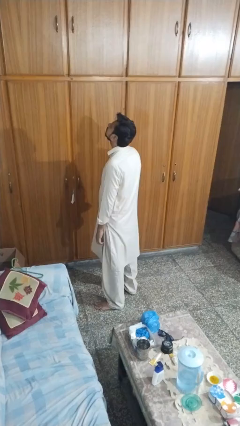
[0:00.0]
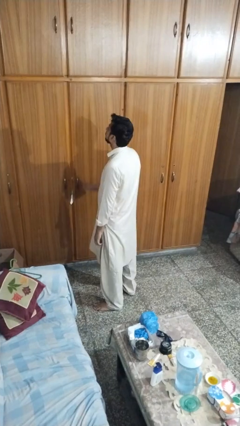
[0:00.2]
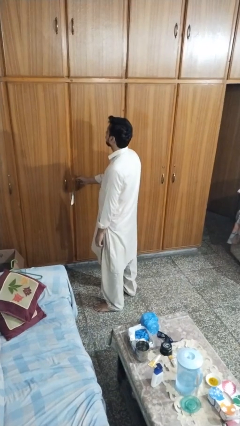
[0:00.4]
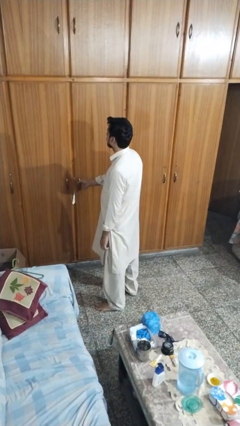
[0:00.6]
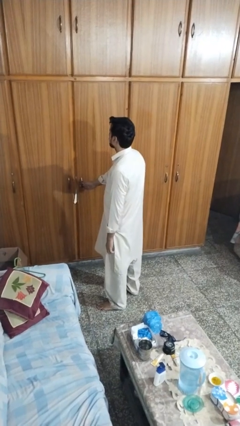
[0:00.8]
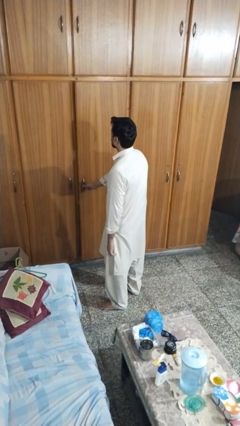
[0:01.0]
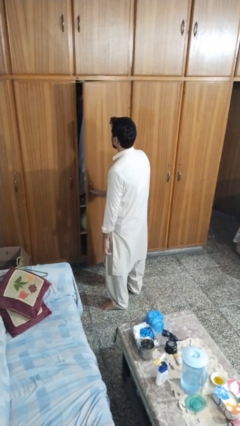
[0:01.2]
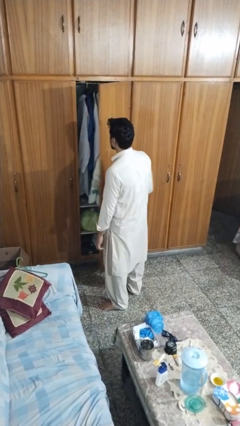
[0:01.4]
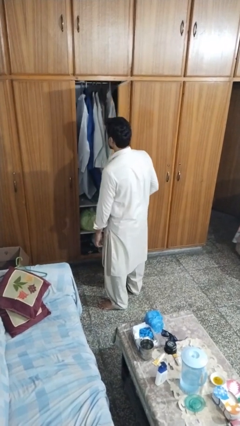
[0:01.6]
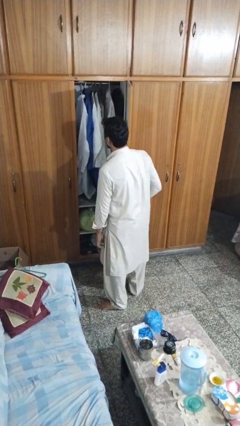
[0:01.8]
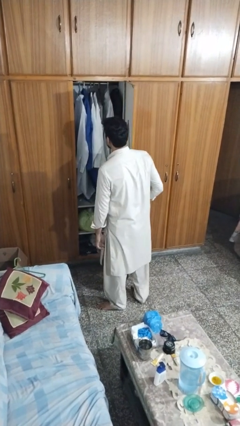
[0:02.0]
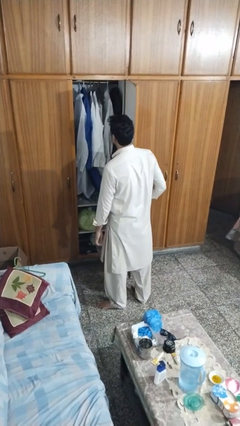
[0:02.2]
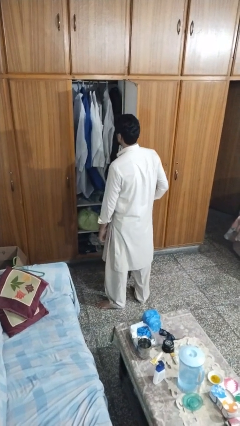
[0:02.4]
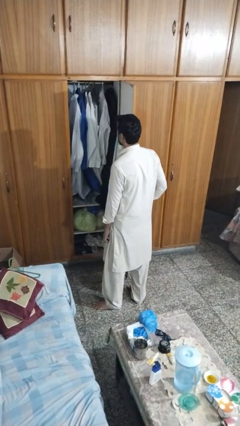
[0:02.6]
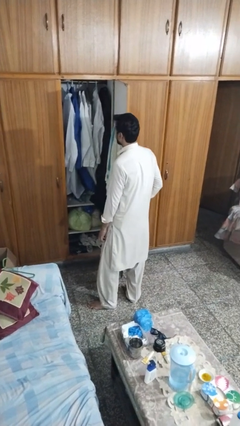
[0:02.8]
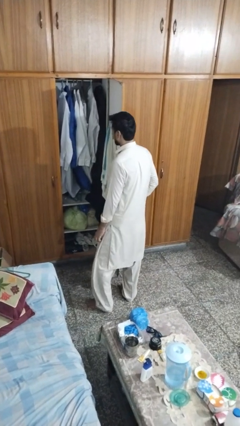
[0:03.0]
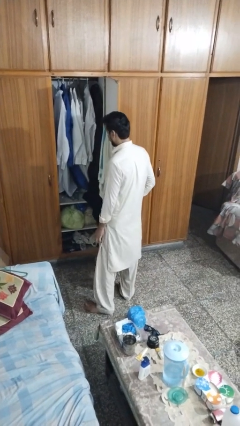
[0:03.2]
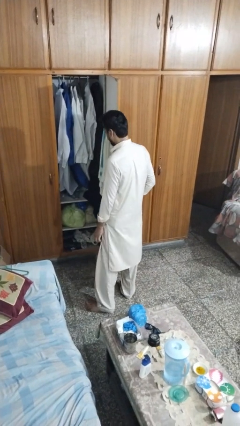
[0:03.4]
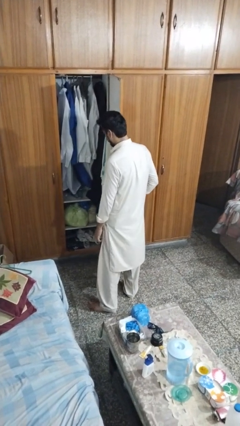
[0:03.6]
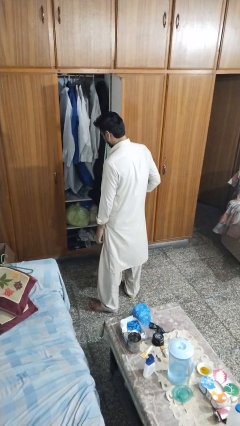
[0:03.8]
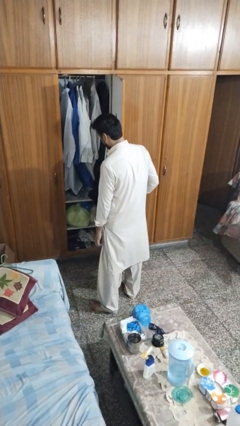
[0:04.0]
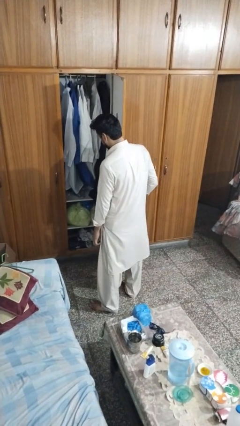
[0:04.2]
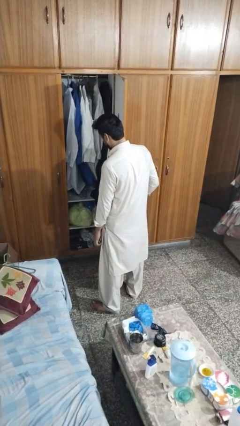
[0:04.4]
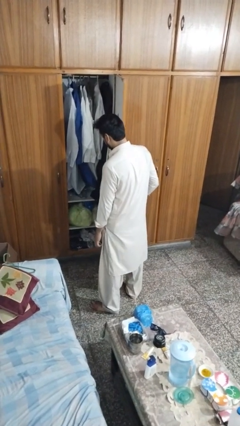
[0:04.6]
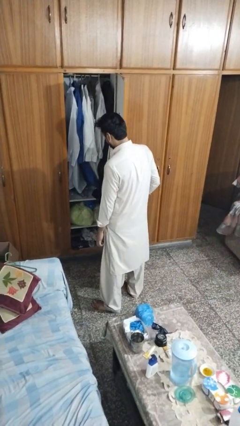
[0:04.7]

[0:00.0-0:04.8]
person opens closet door

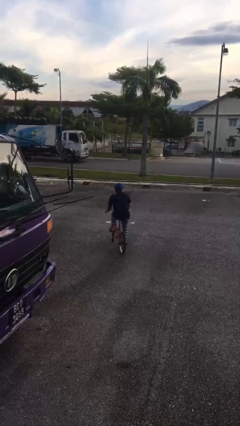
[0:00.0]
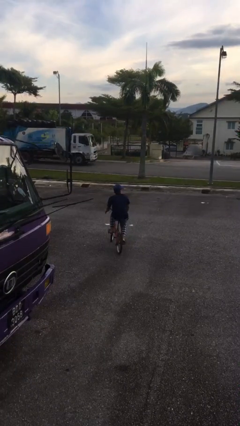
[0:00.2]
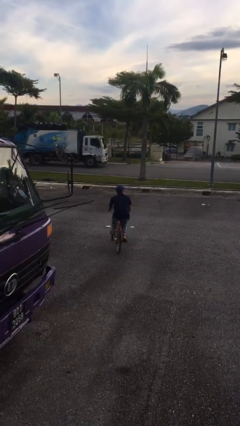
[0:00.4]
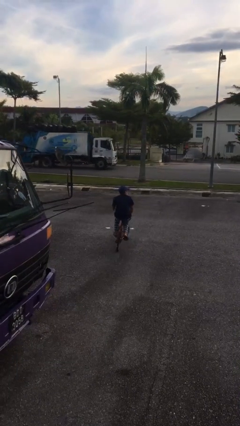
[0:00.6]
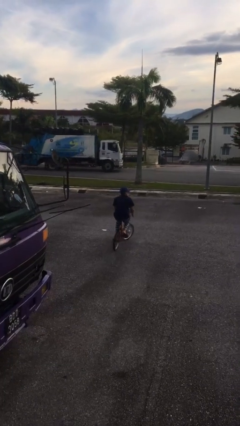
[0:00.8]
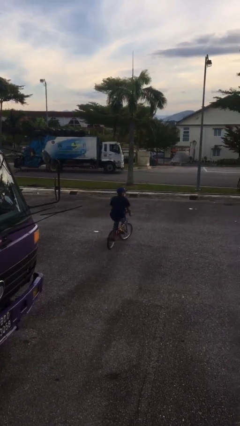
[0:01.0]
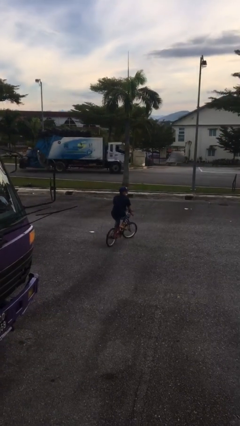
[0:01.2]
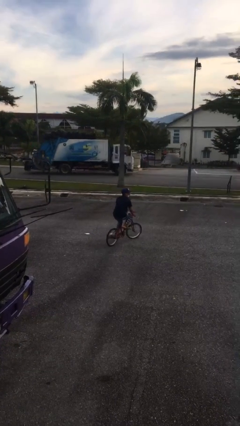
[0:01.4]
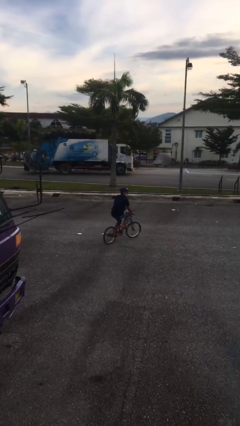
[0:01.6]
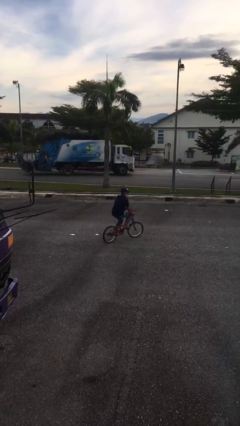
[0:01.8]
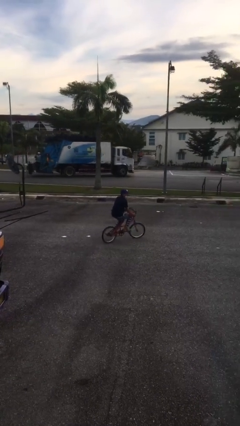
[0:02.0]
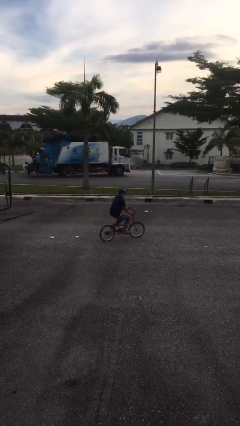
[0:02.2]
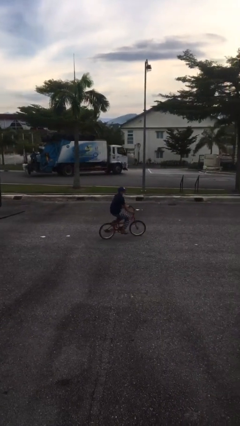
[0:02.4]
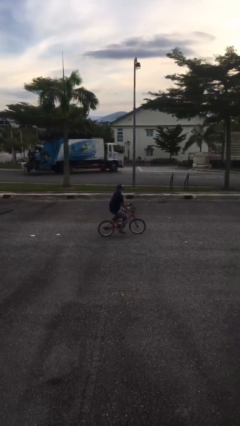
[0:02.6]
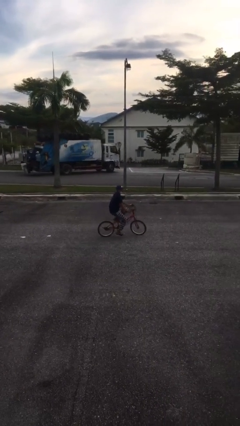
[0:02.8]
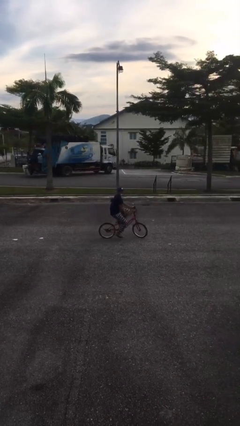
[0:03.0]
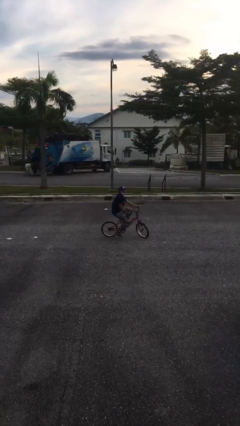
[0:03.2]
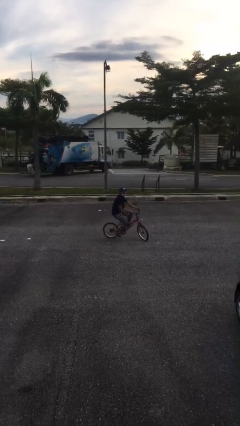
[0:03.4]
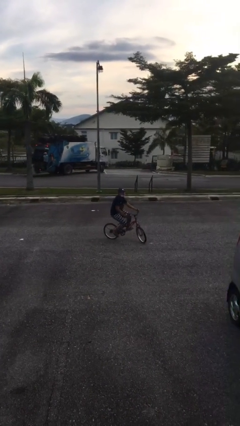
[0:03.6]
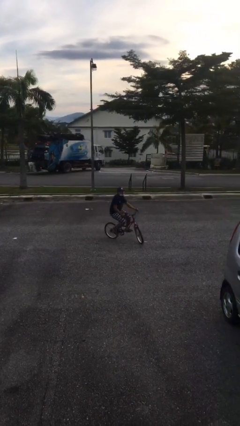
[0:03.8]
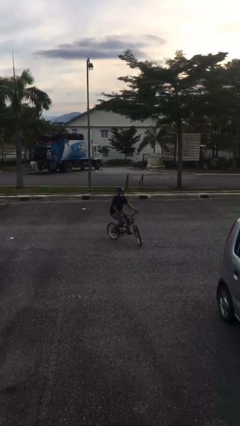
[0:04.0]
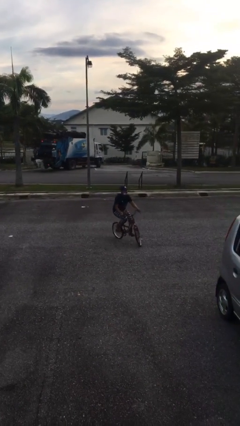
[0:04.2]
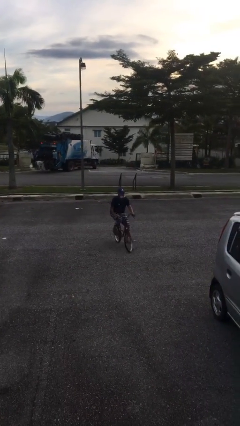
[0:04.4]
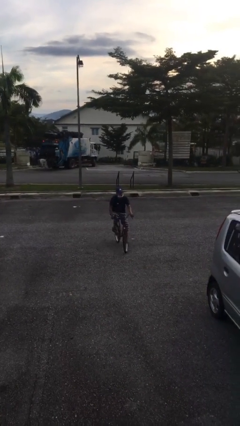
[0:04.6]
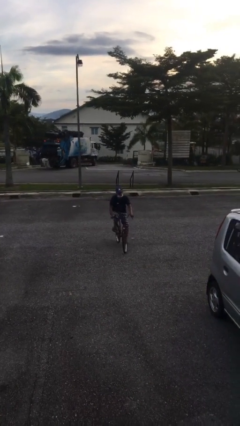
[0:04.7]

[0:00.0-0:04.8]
person rides bicycle

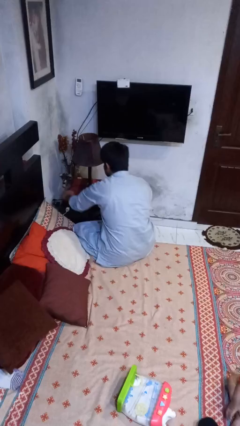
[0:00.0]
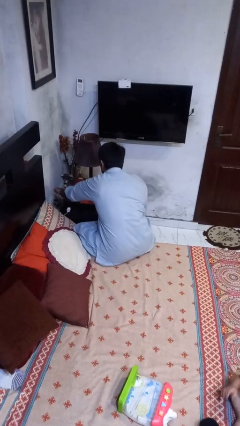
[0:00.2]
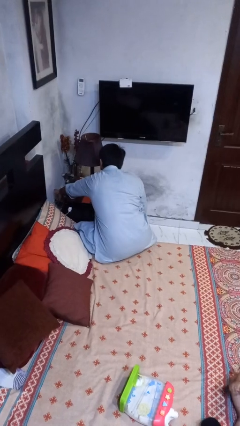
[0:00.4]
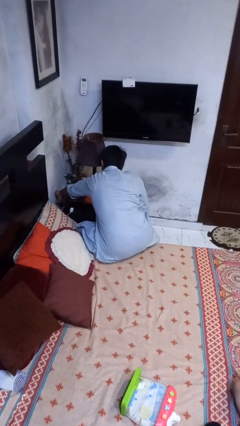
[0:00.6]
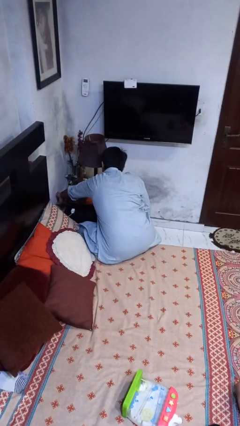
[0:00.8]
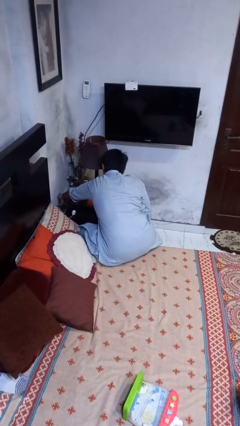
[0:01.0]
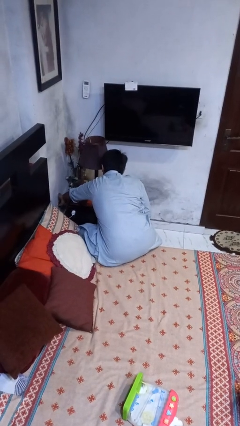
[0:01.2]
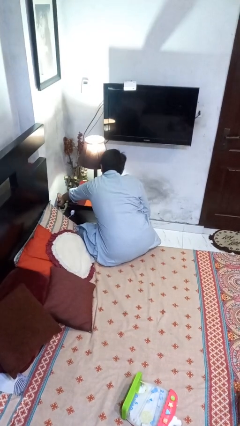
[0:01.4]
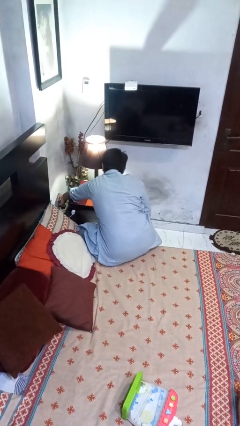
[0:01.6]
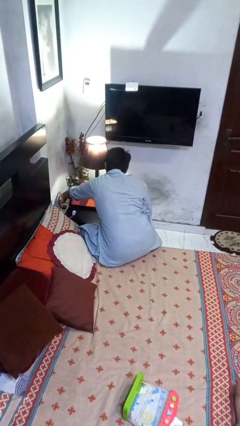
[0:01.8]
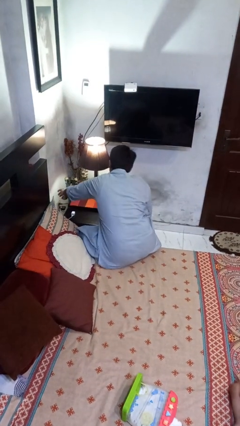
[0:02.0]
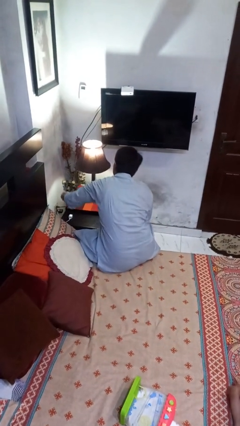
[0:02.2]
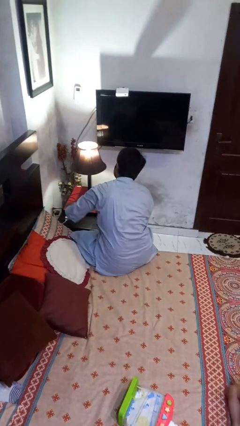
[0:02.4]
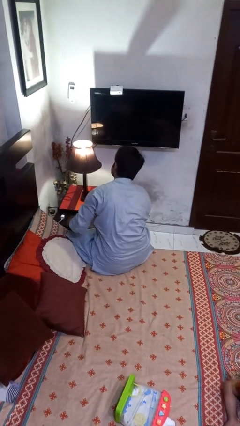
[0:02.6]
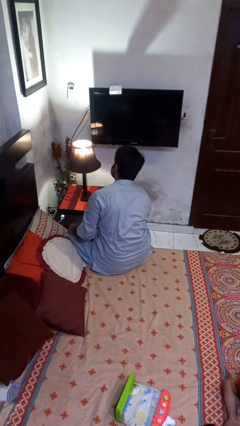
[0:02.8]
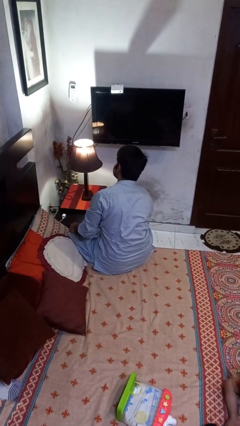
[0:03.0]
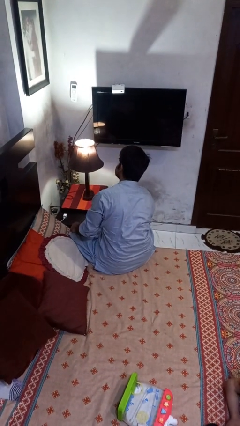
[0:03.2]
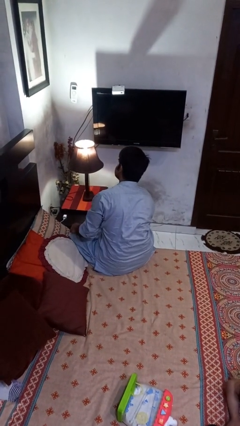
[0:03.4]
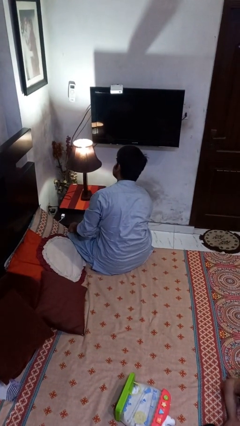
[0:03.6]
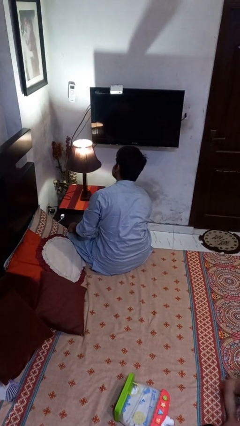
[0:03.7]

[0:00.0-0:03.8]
person turns on lamp

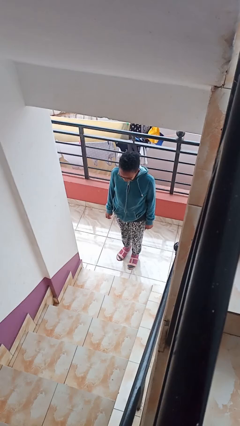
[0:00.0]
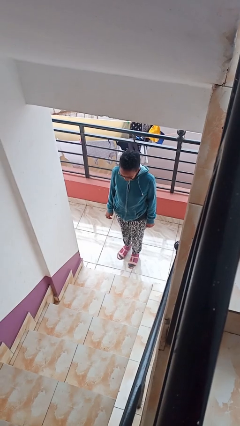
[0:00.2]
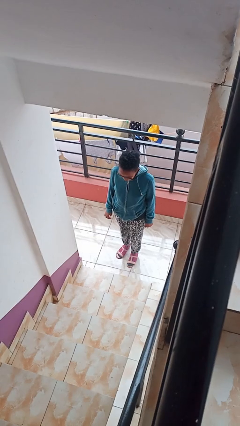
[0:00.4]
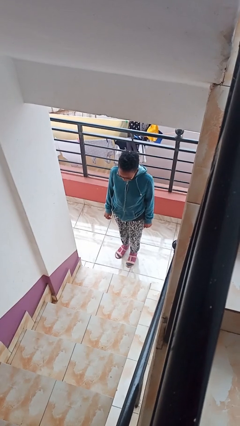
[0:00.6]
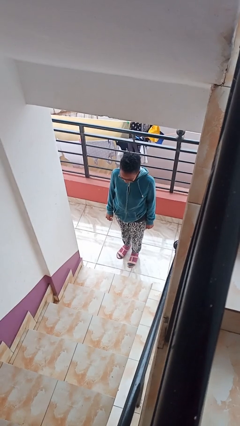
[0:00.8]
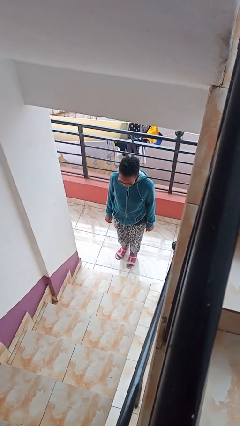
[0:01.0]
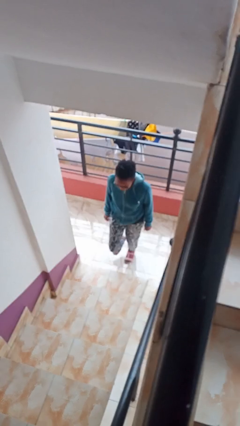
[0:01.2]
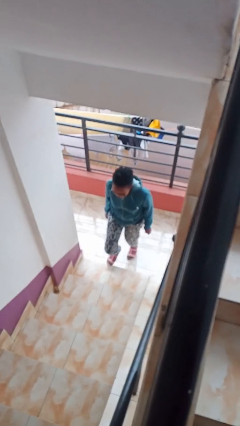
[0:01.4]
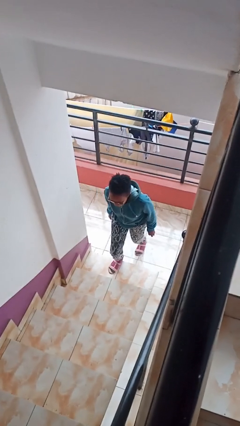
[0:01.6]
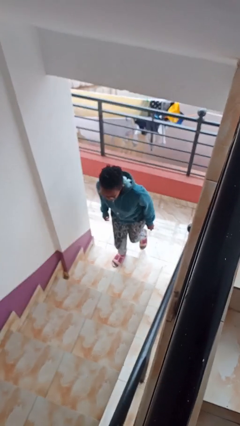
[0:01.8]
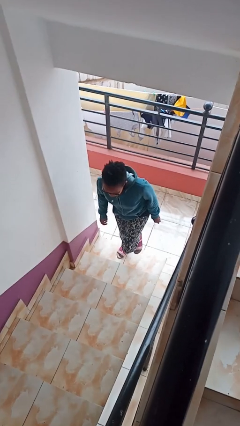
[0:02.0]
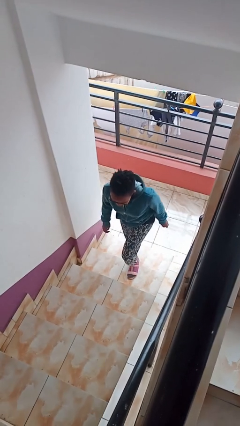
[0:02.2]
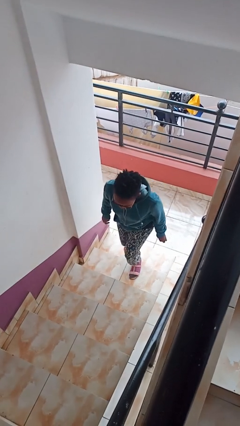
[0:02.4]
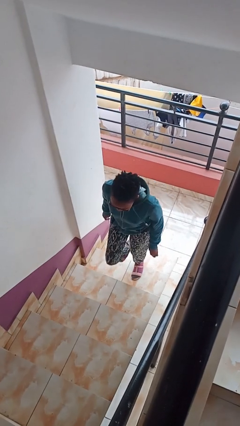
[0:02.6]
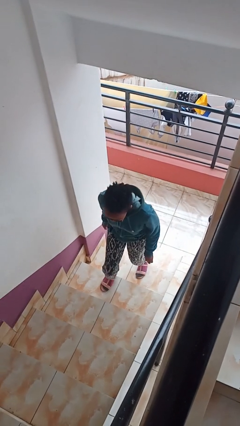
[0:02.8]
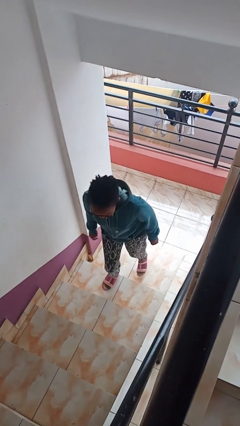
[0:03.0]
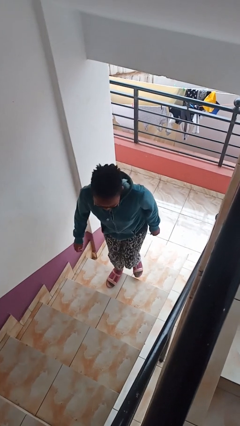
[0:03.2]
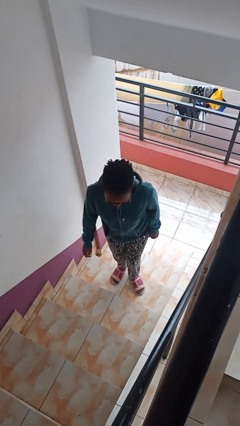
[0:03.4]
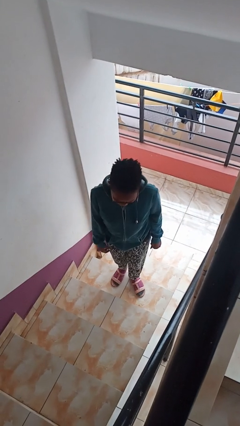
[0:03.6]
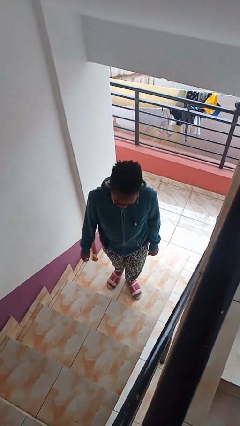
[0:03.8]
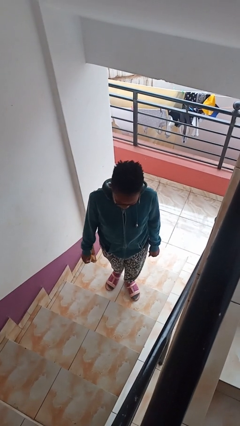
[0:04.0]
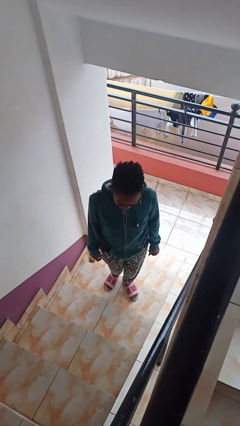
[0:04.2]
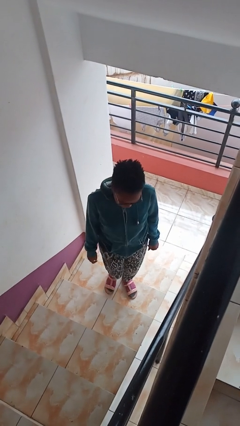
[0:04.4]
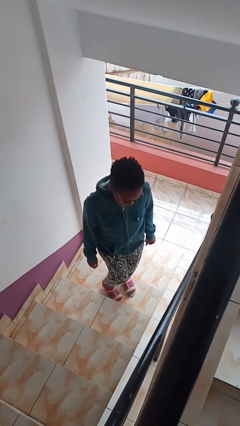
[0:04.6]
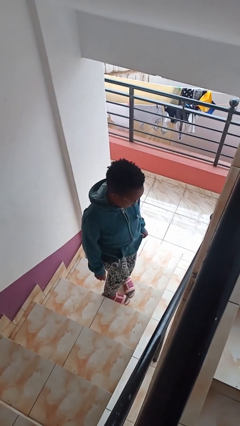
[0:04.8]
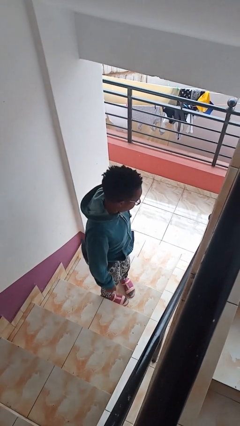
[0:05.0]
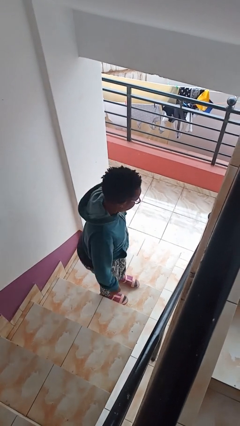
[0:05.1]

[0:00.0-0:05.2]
person climbs up stairs
